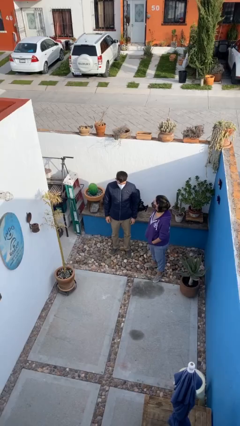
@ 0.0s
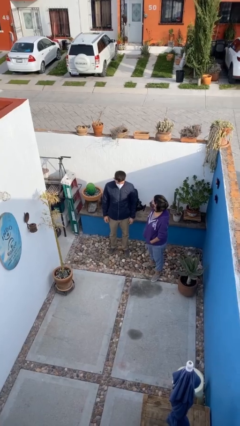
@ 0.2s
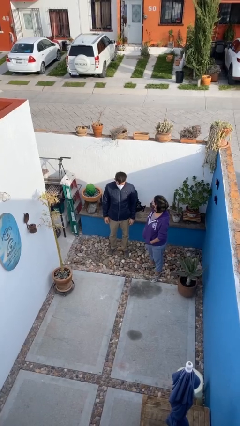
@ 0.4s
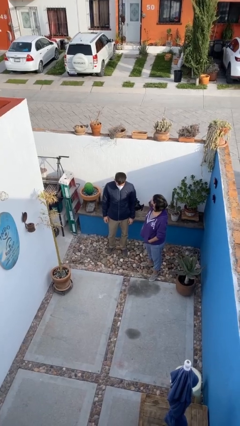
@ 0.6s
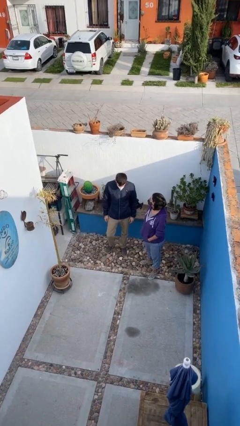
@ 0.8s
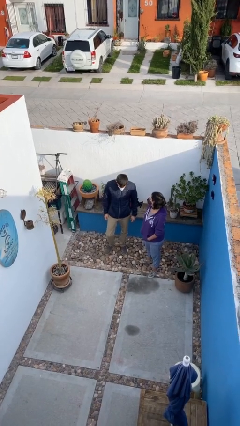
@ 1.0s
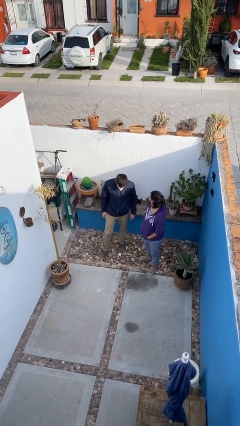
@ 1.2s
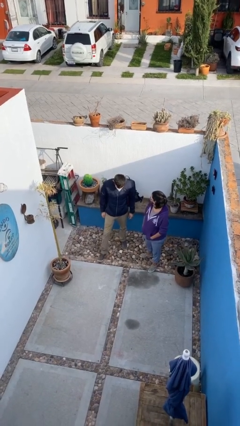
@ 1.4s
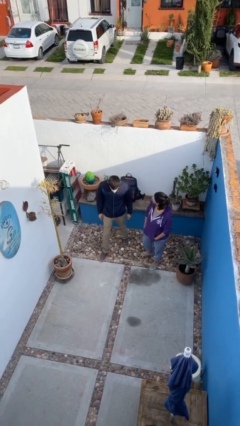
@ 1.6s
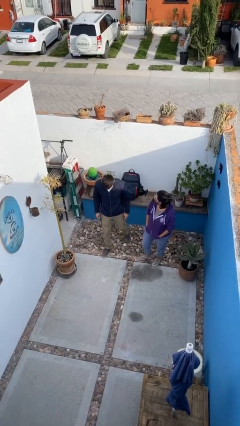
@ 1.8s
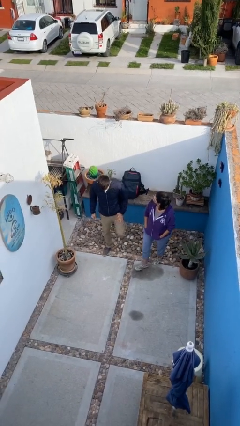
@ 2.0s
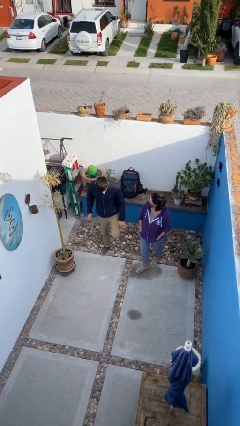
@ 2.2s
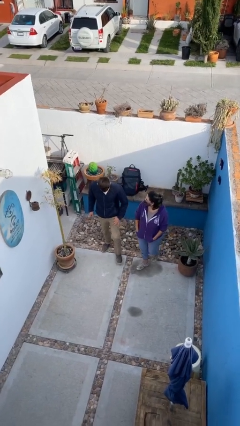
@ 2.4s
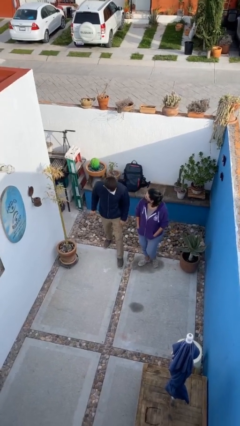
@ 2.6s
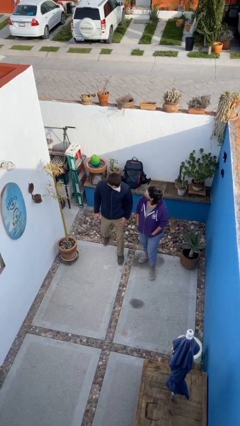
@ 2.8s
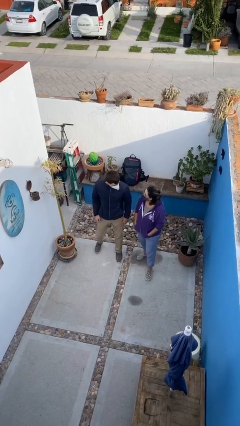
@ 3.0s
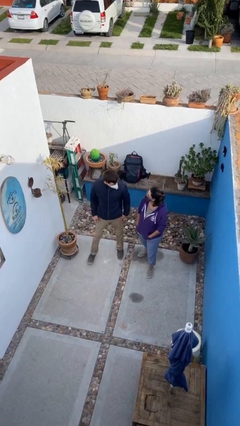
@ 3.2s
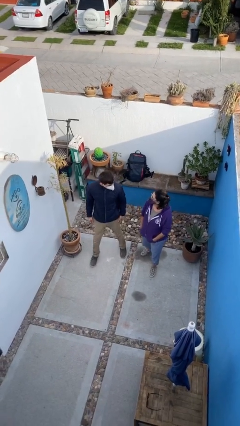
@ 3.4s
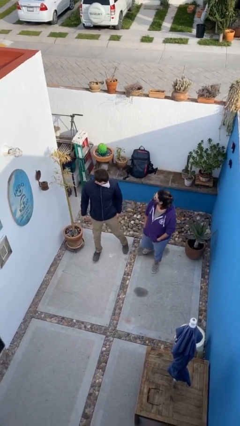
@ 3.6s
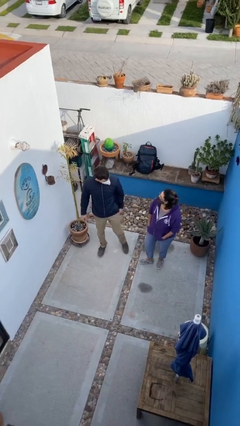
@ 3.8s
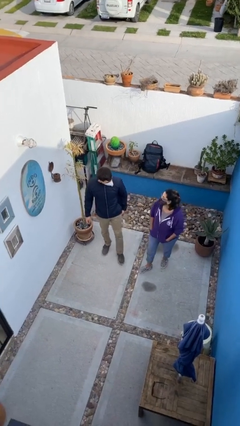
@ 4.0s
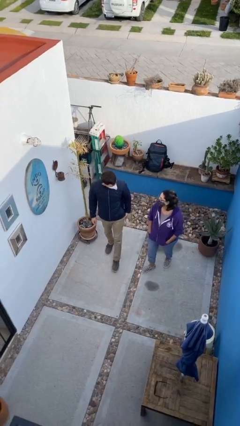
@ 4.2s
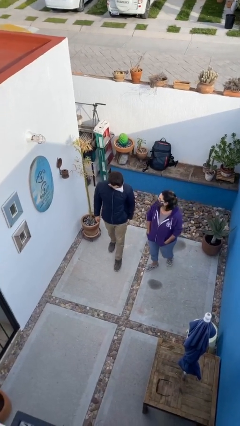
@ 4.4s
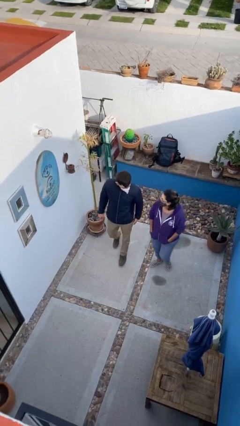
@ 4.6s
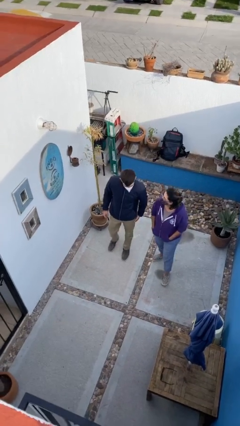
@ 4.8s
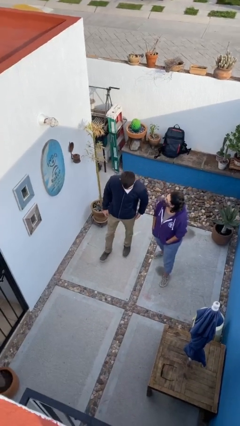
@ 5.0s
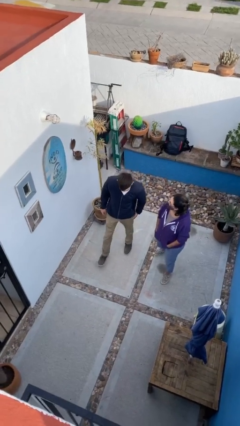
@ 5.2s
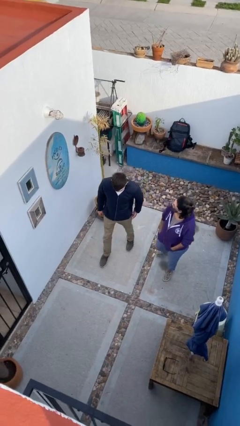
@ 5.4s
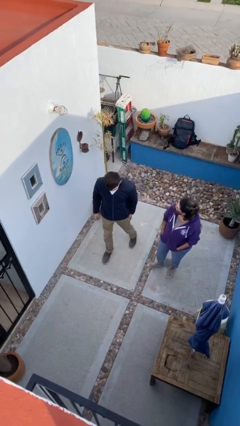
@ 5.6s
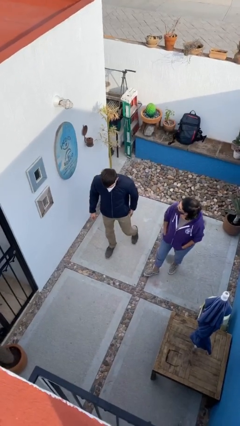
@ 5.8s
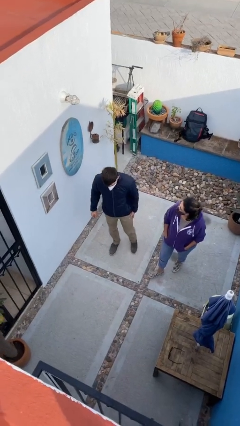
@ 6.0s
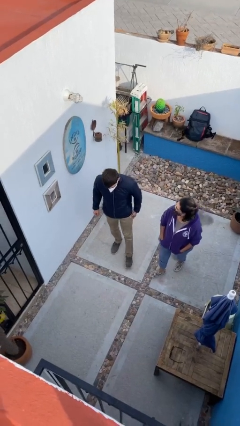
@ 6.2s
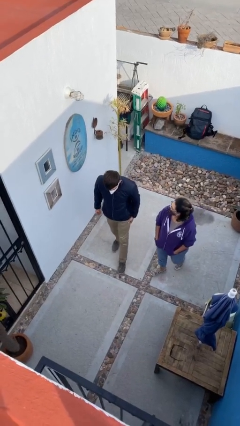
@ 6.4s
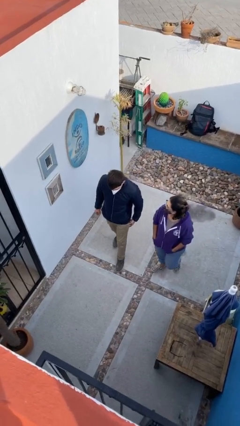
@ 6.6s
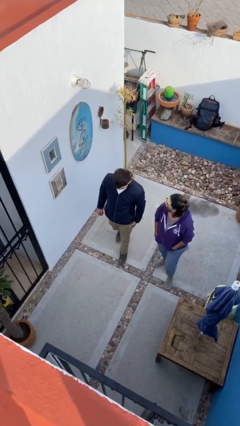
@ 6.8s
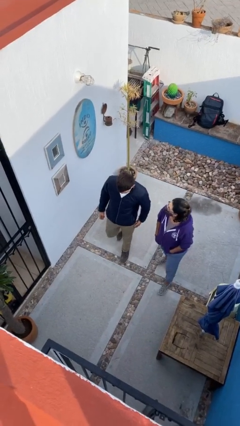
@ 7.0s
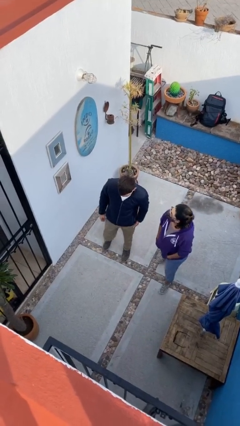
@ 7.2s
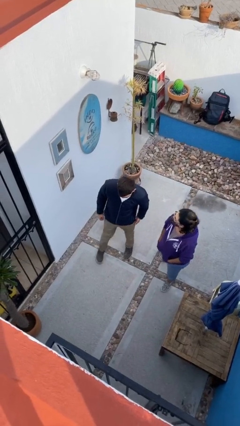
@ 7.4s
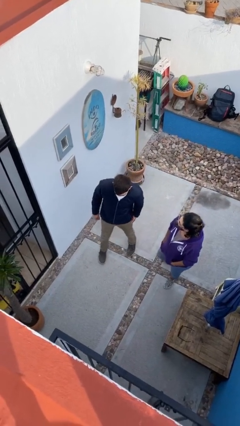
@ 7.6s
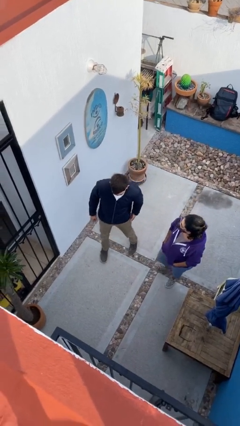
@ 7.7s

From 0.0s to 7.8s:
person talks to person

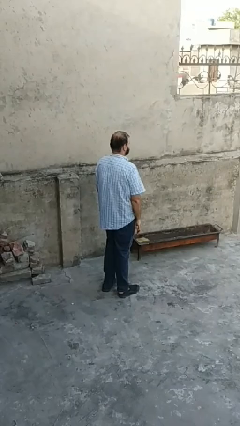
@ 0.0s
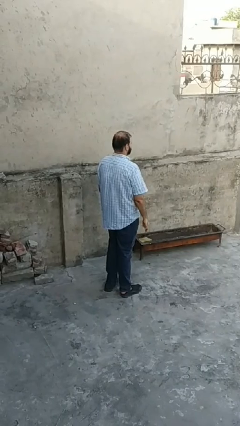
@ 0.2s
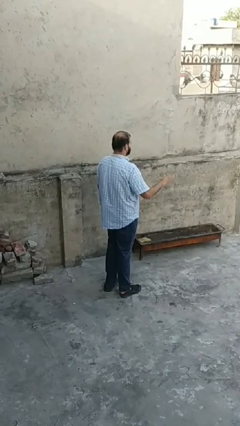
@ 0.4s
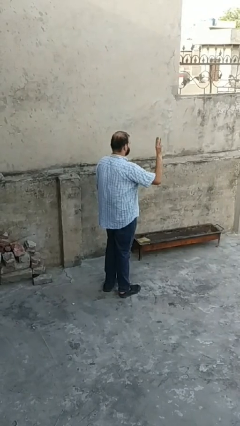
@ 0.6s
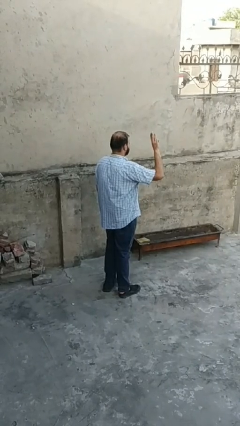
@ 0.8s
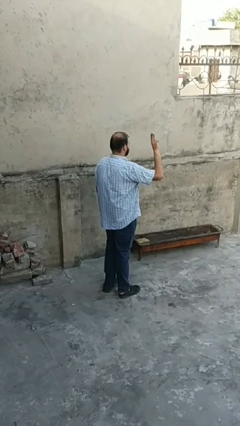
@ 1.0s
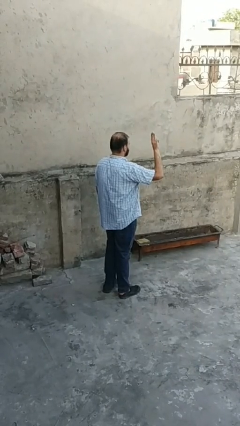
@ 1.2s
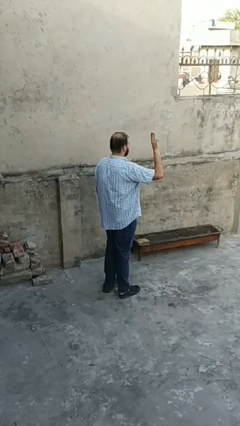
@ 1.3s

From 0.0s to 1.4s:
person gestures number three

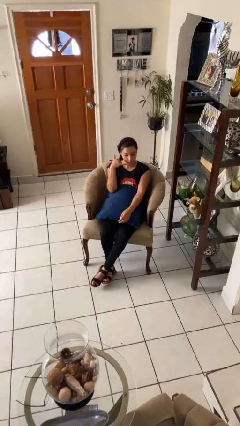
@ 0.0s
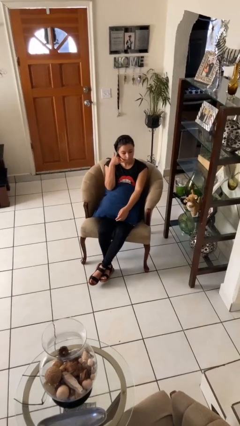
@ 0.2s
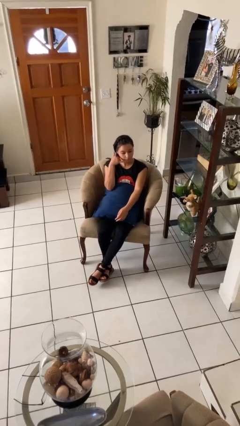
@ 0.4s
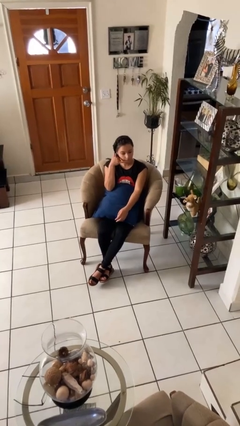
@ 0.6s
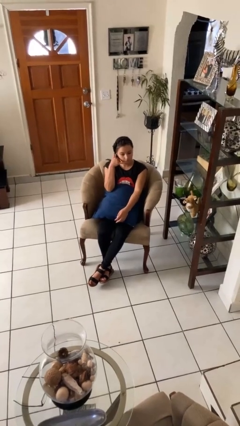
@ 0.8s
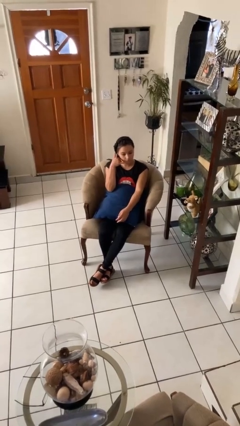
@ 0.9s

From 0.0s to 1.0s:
person gestures call me

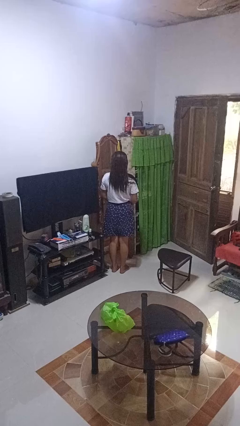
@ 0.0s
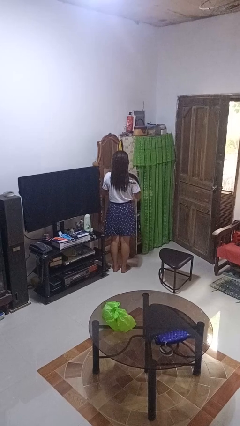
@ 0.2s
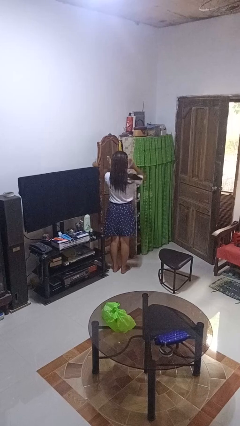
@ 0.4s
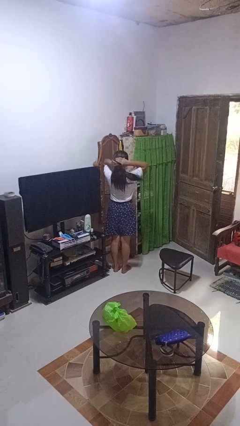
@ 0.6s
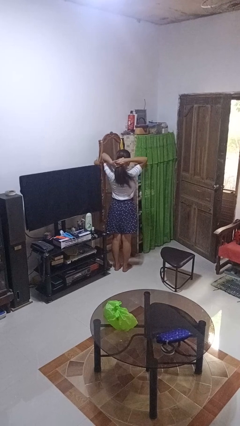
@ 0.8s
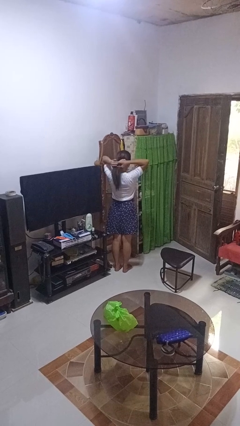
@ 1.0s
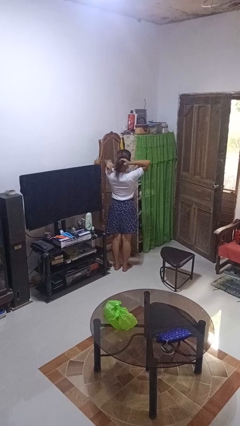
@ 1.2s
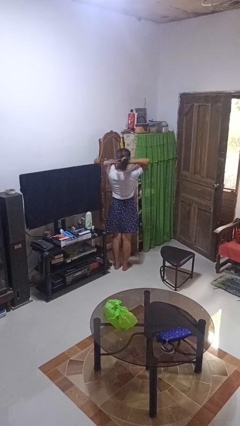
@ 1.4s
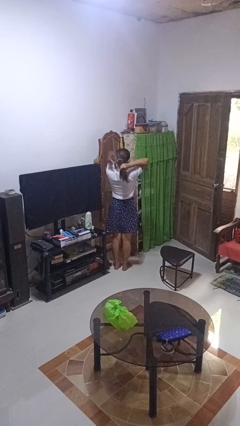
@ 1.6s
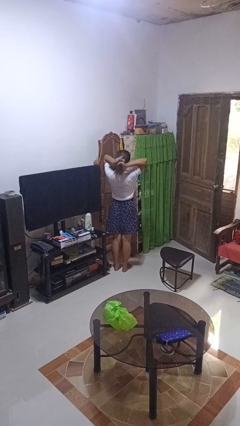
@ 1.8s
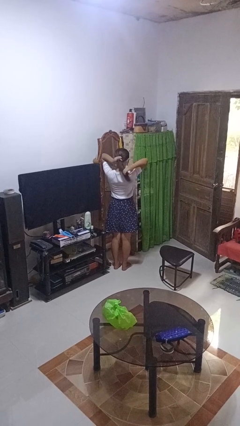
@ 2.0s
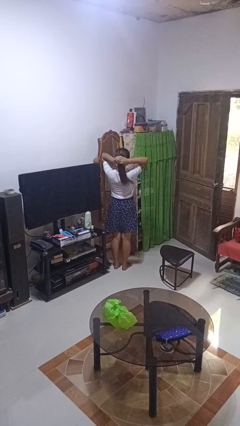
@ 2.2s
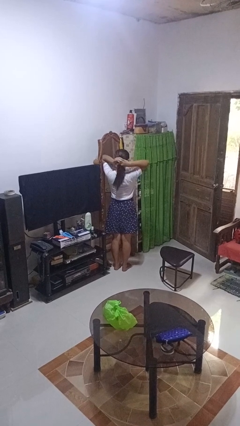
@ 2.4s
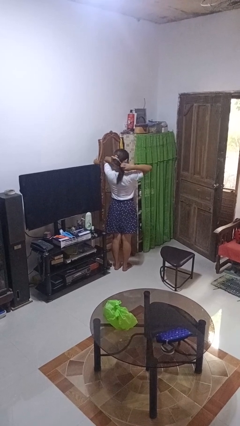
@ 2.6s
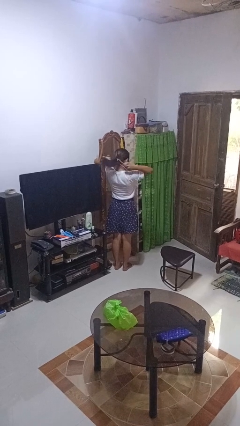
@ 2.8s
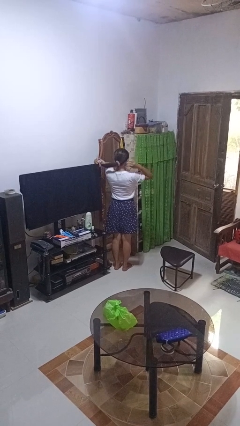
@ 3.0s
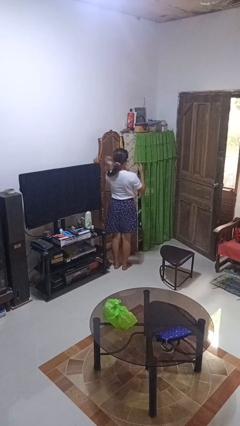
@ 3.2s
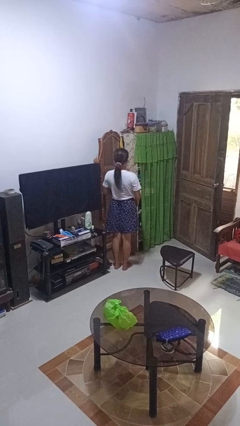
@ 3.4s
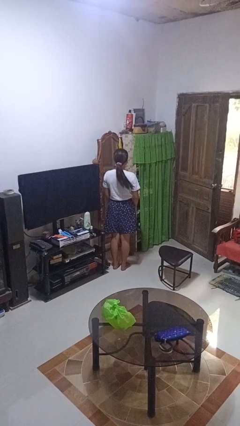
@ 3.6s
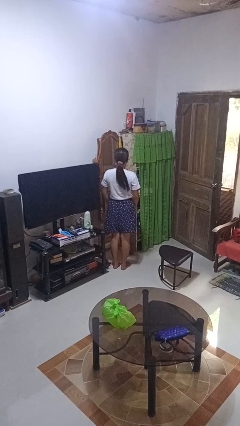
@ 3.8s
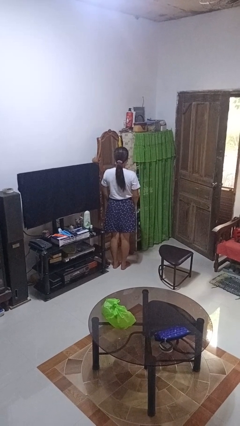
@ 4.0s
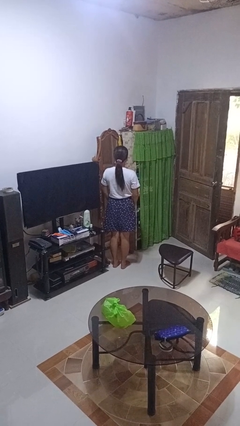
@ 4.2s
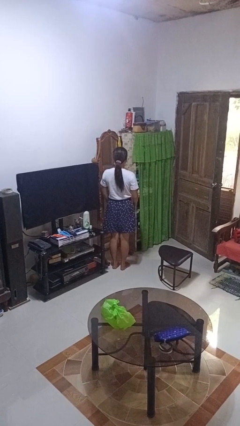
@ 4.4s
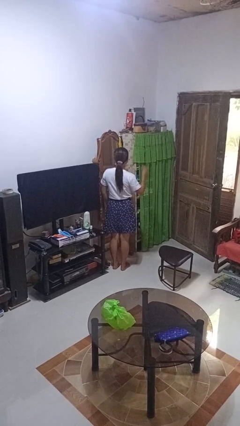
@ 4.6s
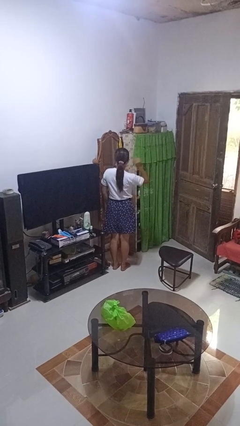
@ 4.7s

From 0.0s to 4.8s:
person puts hair in ponytail

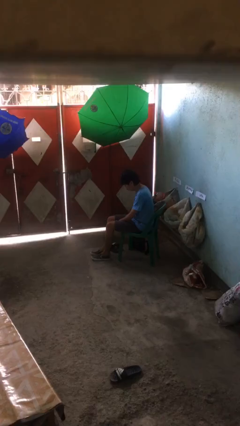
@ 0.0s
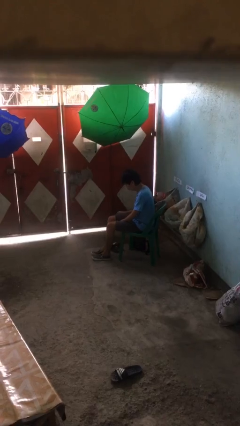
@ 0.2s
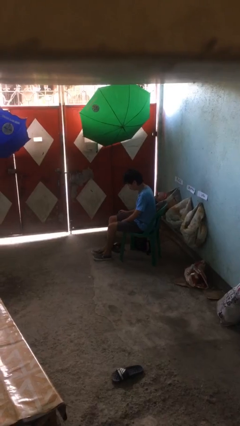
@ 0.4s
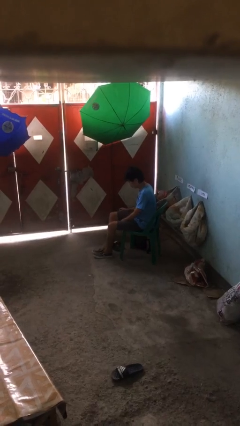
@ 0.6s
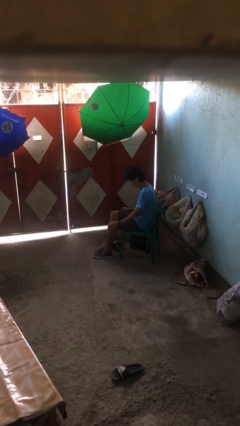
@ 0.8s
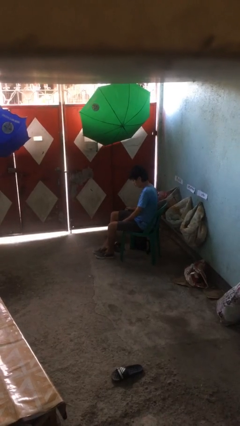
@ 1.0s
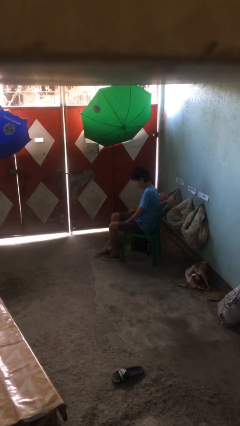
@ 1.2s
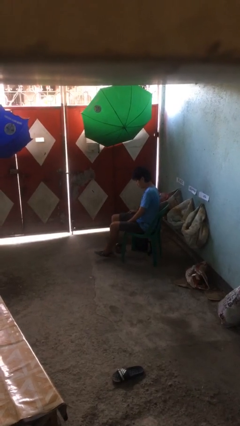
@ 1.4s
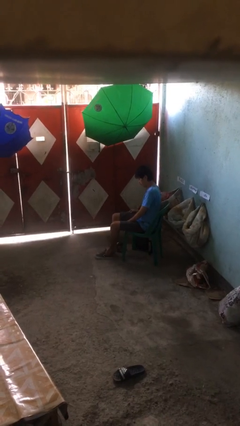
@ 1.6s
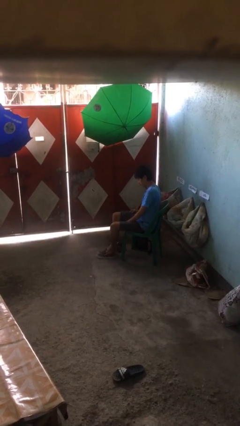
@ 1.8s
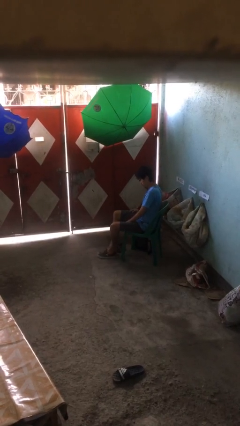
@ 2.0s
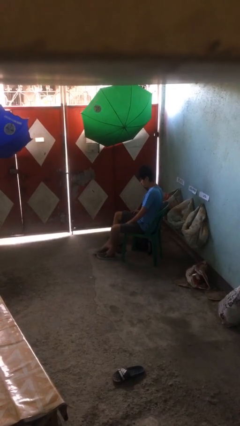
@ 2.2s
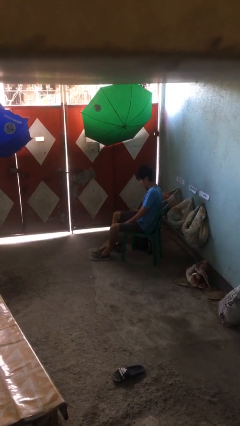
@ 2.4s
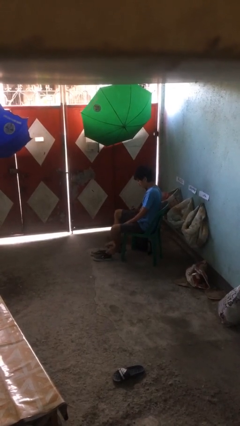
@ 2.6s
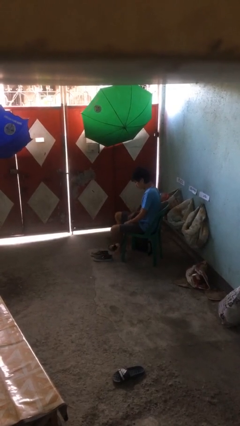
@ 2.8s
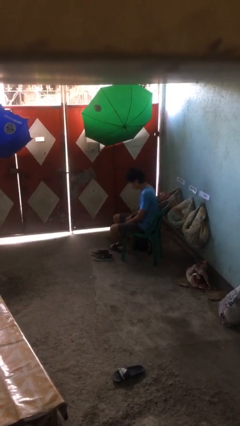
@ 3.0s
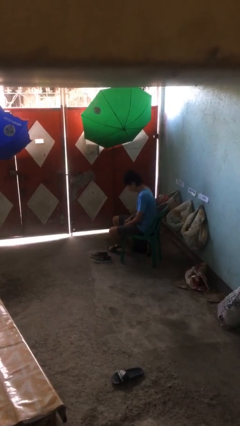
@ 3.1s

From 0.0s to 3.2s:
person takes off shoes
